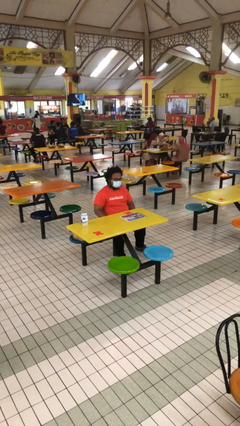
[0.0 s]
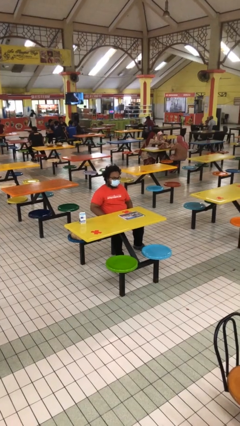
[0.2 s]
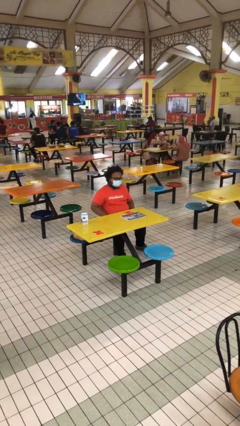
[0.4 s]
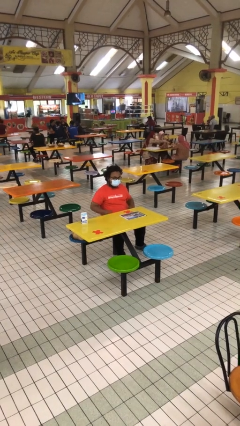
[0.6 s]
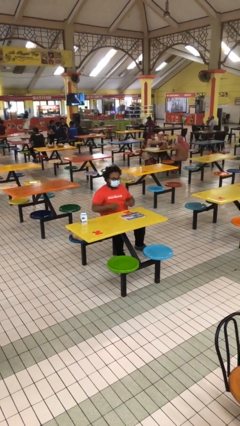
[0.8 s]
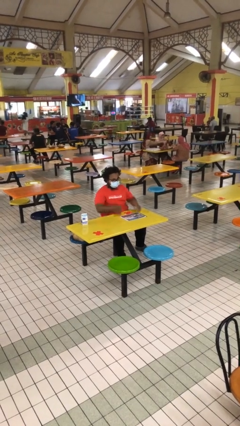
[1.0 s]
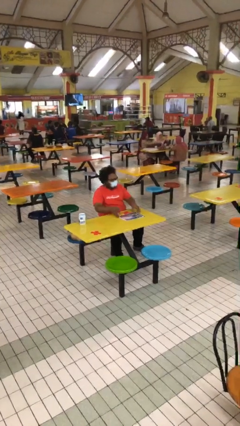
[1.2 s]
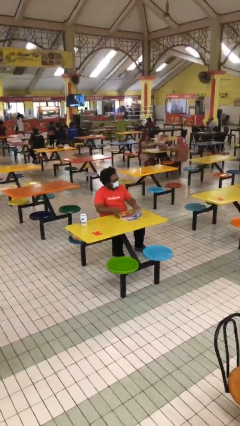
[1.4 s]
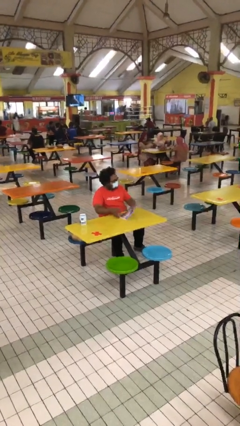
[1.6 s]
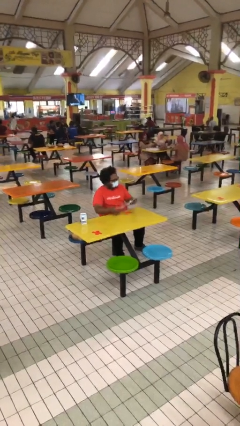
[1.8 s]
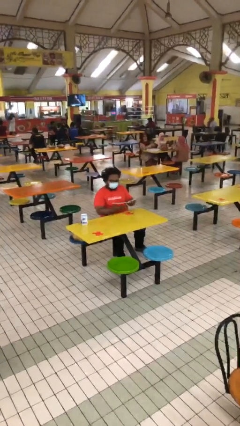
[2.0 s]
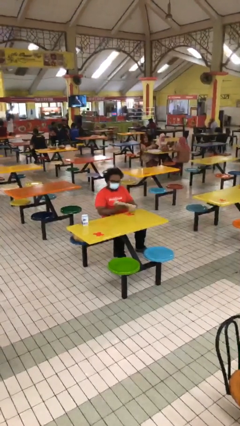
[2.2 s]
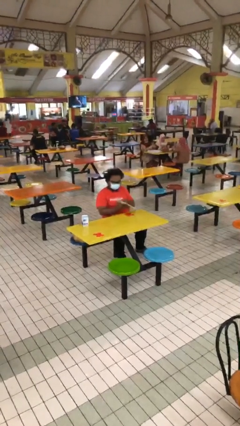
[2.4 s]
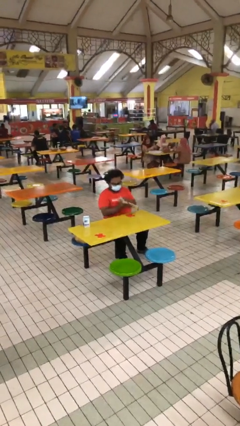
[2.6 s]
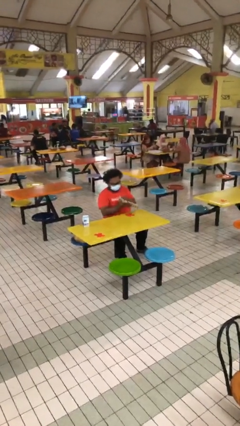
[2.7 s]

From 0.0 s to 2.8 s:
person picks up object from table

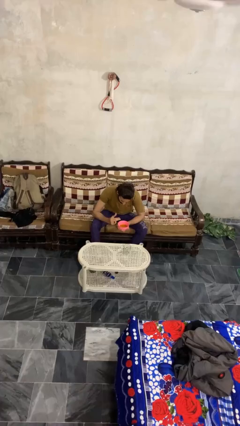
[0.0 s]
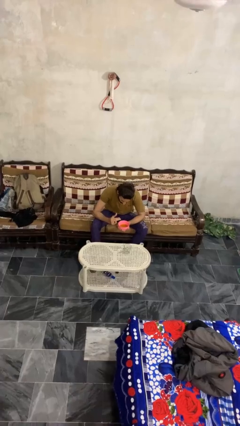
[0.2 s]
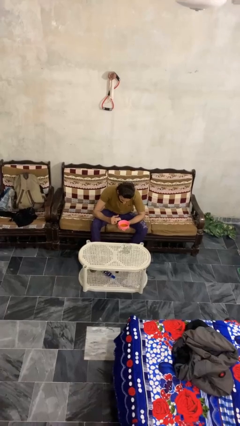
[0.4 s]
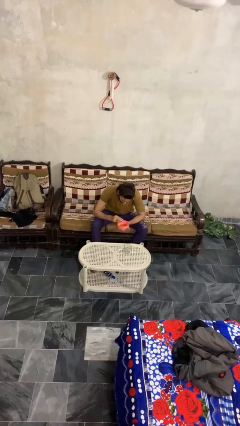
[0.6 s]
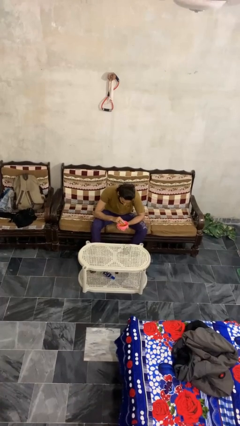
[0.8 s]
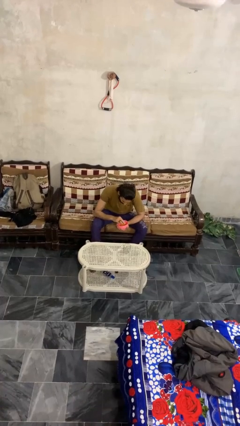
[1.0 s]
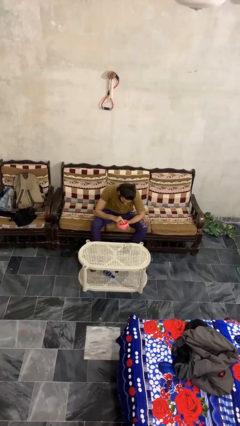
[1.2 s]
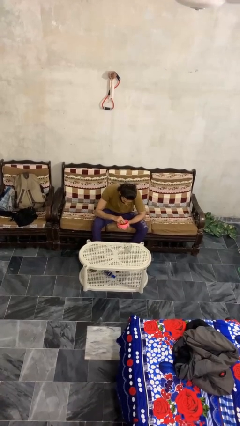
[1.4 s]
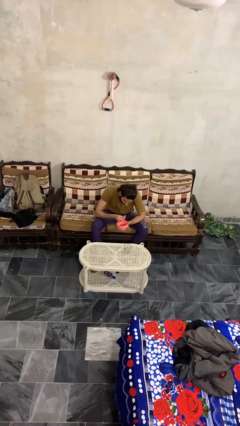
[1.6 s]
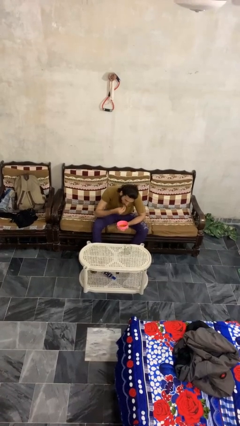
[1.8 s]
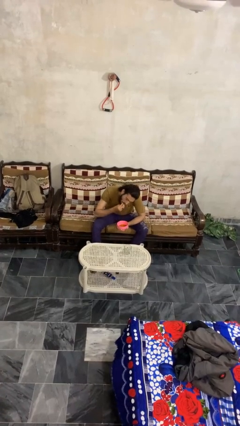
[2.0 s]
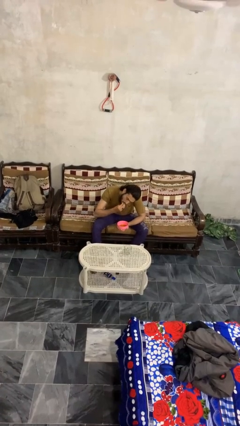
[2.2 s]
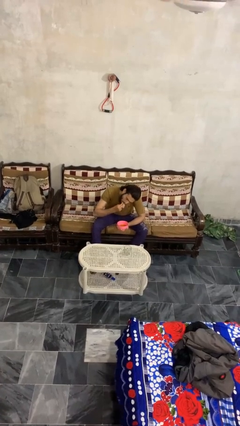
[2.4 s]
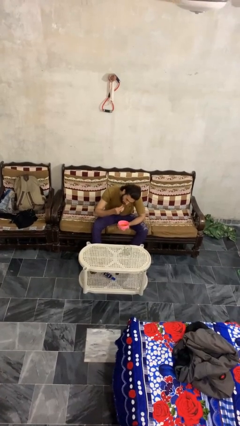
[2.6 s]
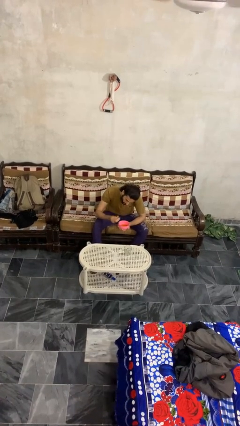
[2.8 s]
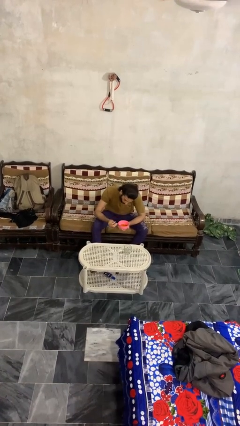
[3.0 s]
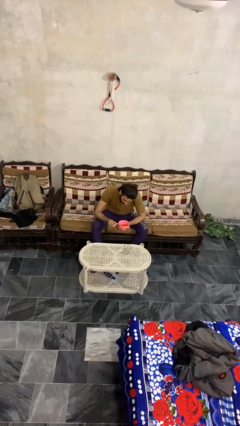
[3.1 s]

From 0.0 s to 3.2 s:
person eats with hands

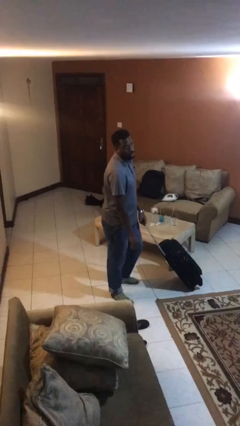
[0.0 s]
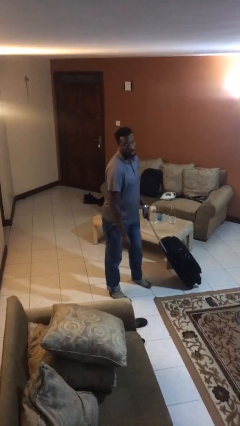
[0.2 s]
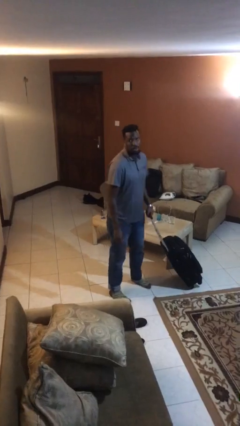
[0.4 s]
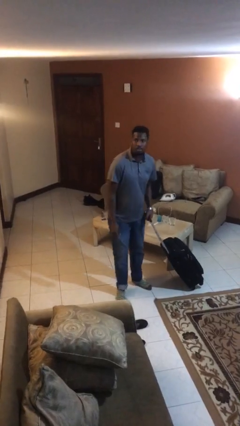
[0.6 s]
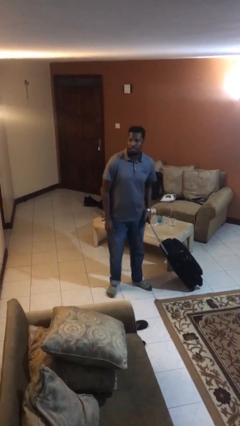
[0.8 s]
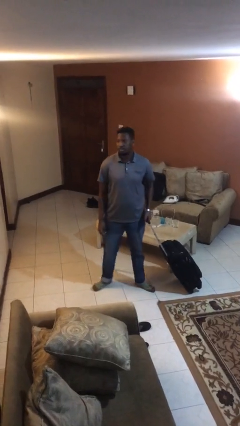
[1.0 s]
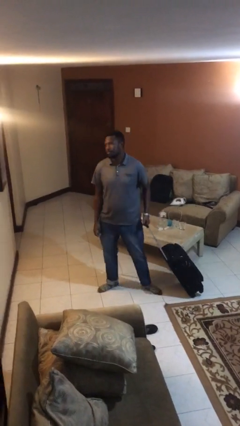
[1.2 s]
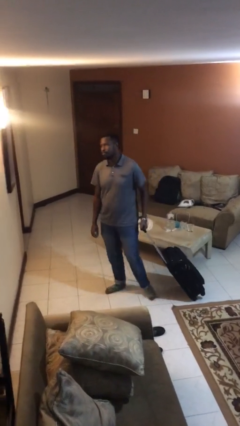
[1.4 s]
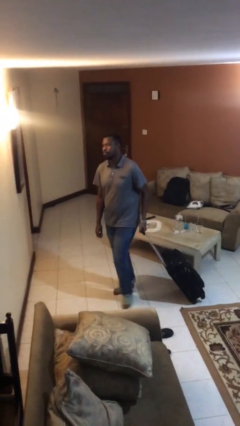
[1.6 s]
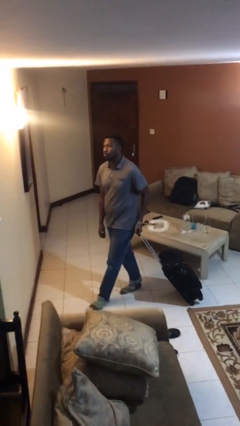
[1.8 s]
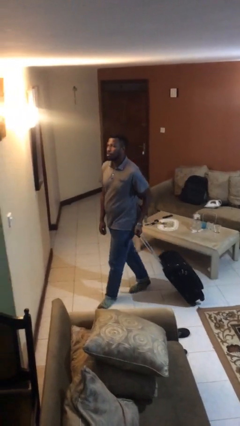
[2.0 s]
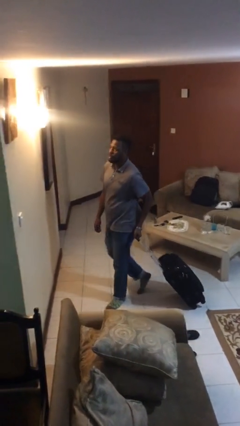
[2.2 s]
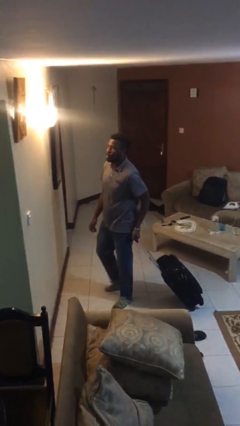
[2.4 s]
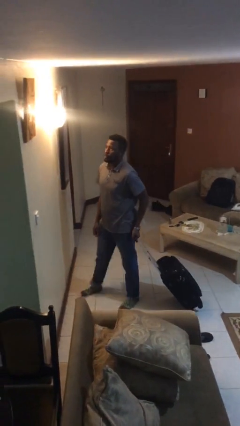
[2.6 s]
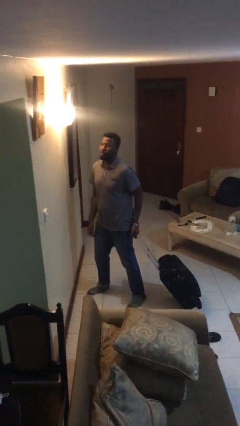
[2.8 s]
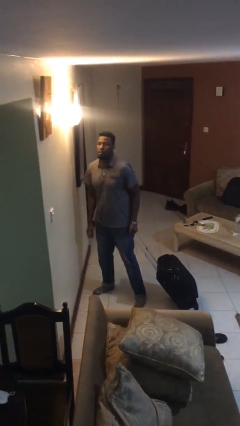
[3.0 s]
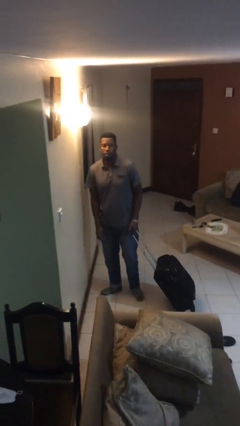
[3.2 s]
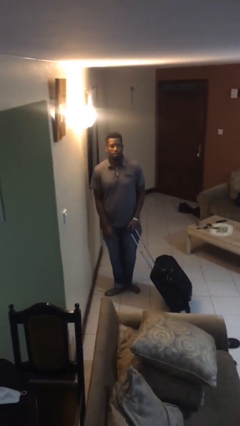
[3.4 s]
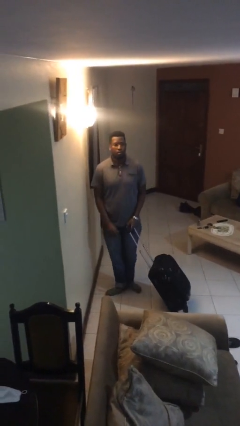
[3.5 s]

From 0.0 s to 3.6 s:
person pulls wheeled cart

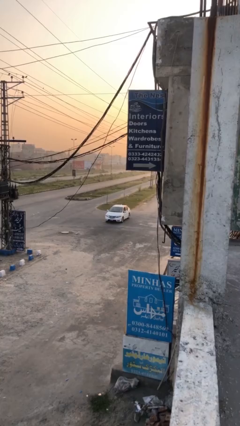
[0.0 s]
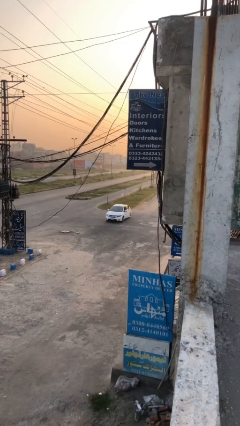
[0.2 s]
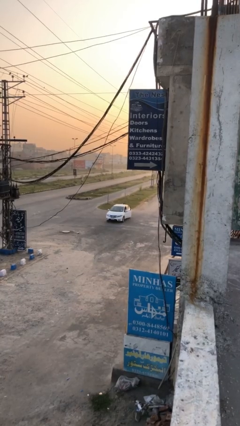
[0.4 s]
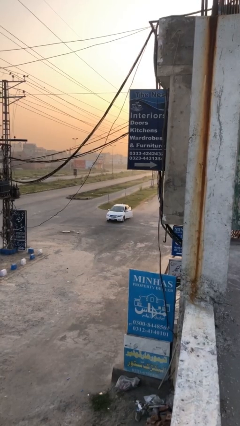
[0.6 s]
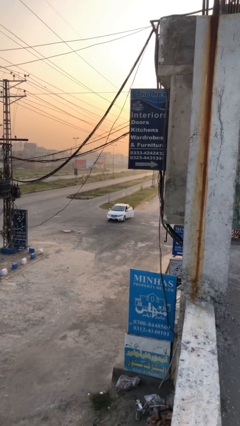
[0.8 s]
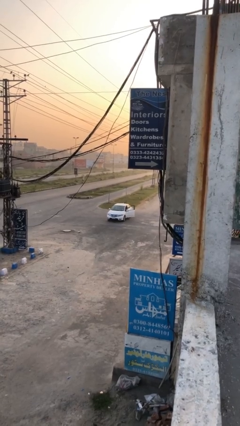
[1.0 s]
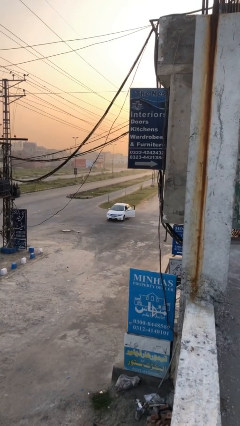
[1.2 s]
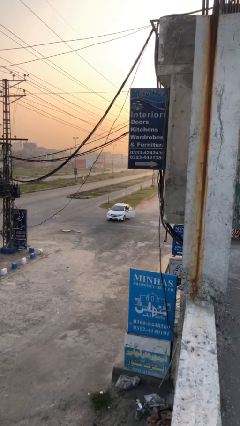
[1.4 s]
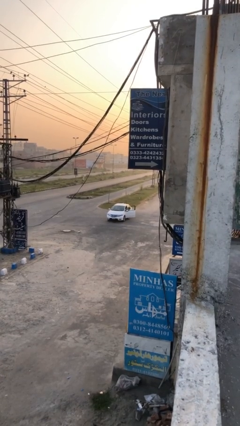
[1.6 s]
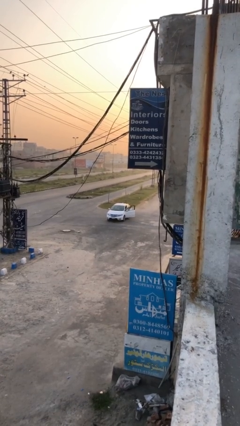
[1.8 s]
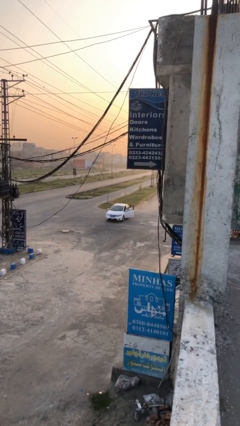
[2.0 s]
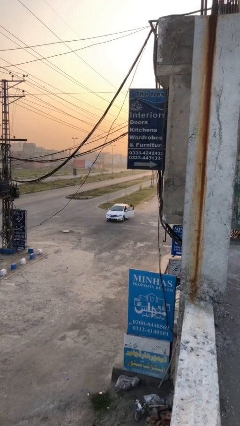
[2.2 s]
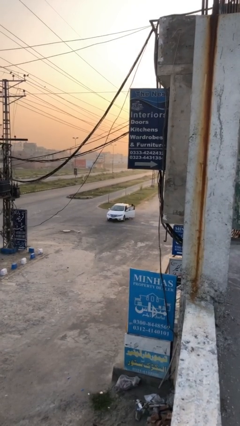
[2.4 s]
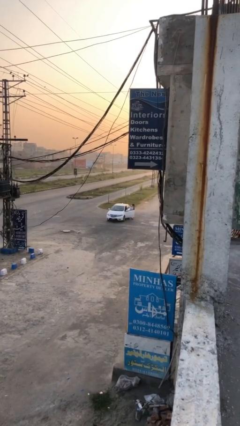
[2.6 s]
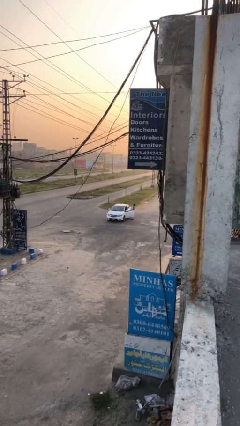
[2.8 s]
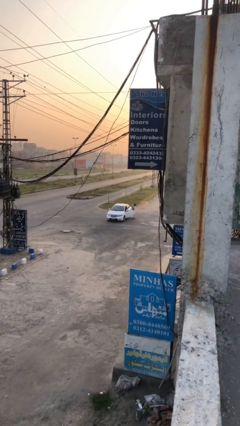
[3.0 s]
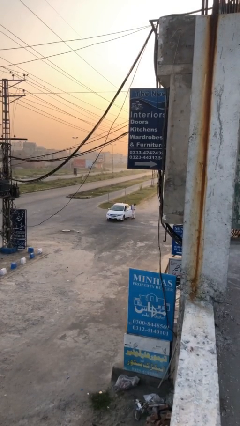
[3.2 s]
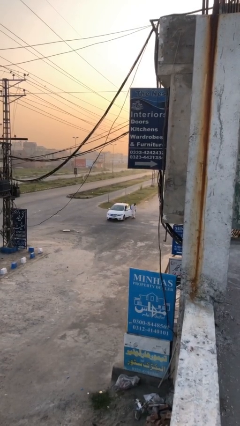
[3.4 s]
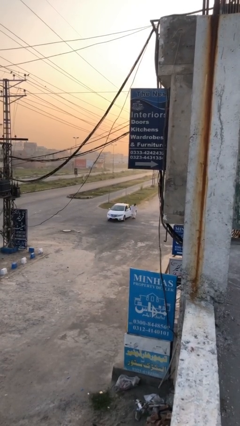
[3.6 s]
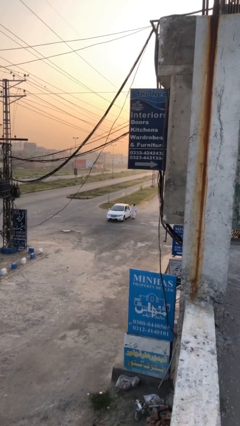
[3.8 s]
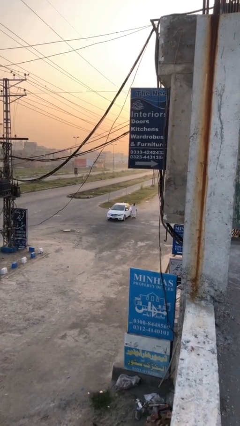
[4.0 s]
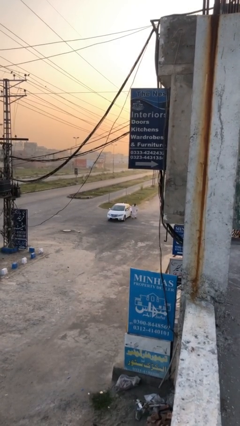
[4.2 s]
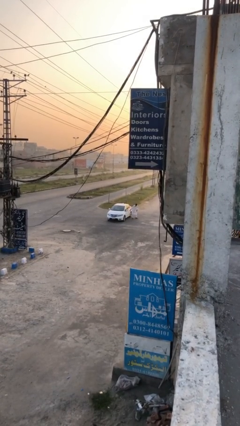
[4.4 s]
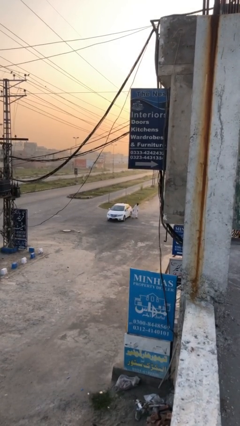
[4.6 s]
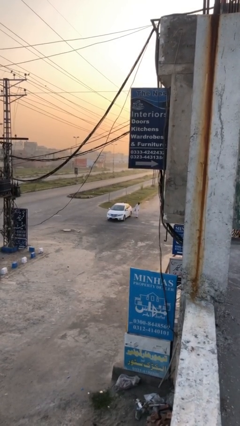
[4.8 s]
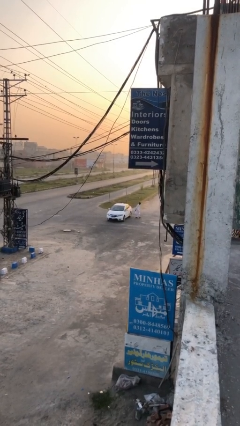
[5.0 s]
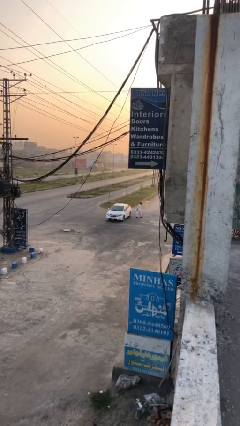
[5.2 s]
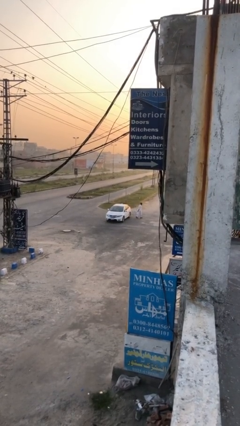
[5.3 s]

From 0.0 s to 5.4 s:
car drops off person

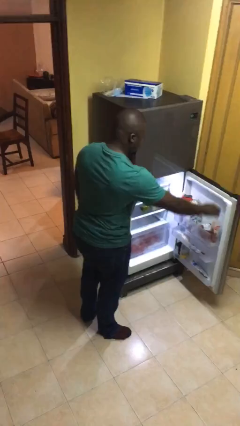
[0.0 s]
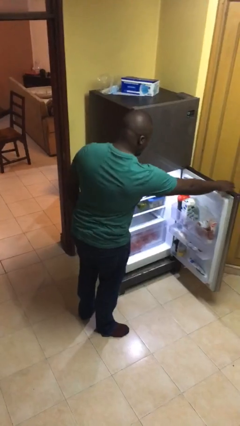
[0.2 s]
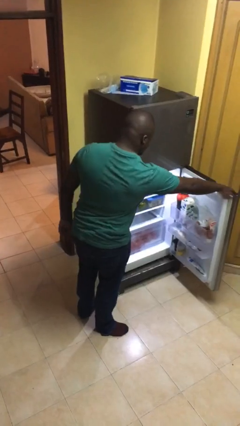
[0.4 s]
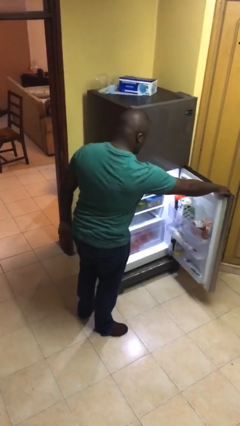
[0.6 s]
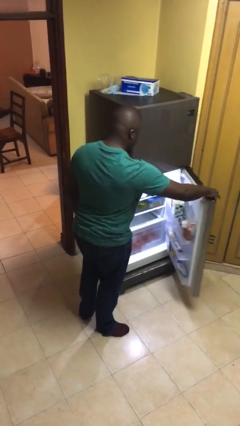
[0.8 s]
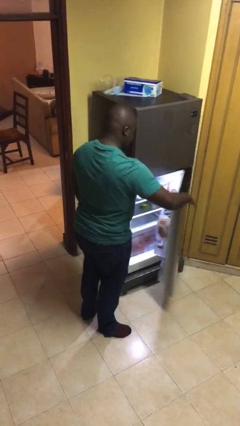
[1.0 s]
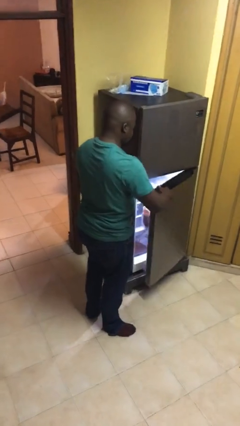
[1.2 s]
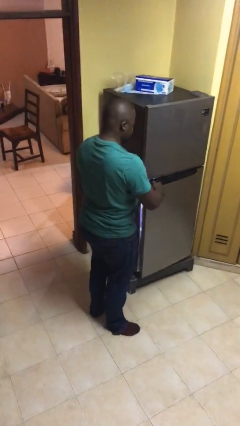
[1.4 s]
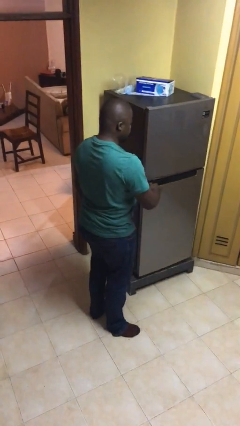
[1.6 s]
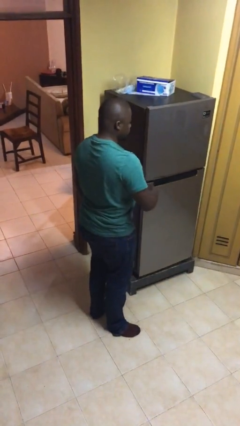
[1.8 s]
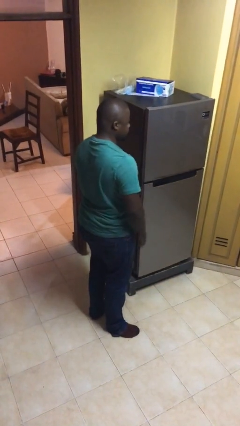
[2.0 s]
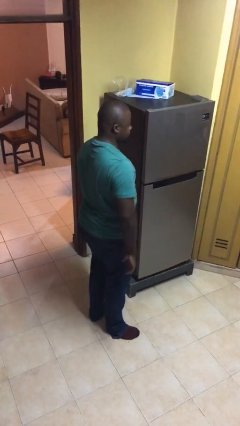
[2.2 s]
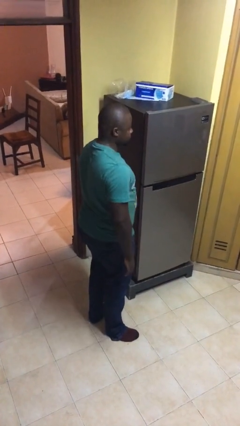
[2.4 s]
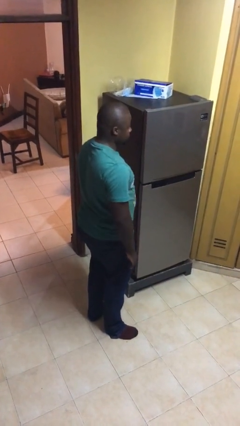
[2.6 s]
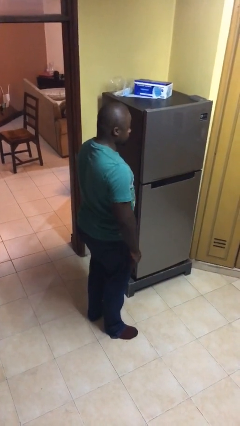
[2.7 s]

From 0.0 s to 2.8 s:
person closes refrigerator
